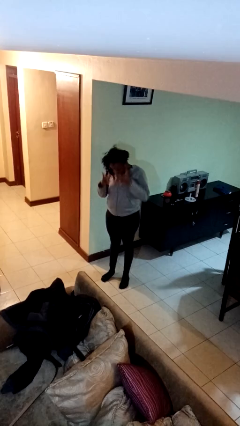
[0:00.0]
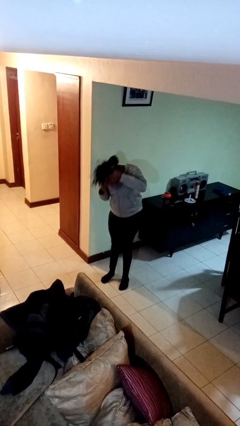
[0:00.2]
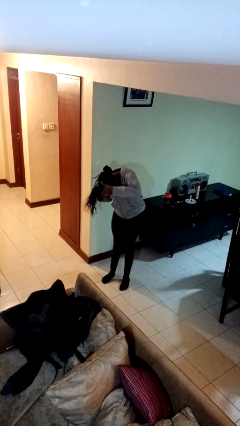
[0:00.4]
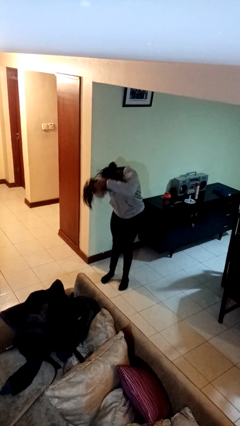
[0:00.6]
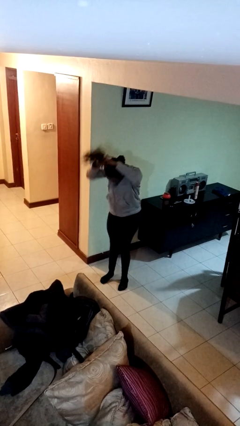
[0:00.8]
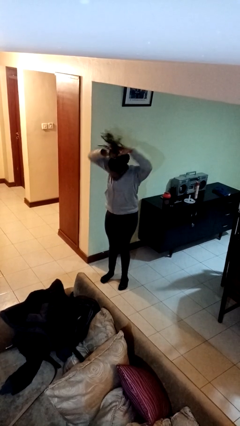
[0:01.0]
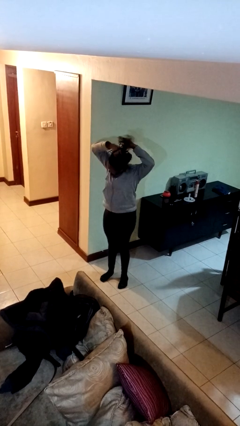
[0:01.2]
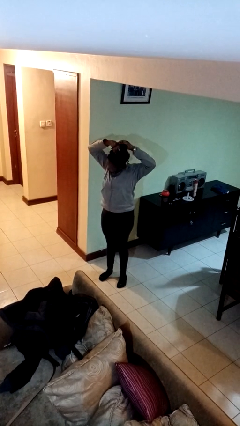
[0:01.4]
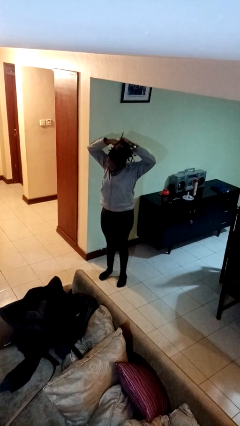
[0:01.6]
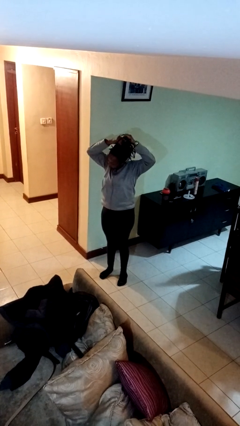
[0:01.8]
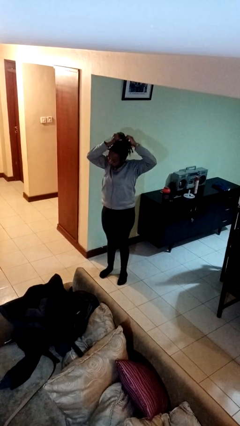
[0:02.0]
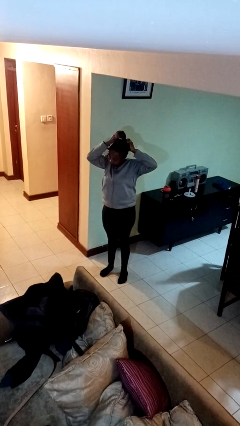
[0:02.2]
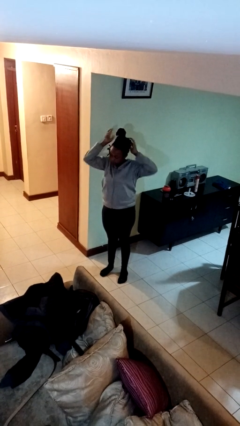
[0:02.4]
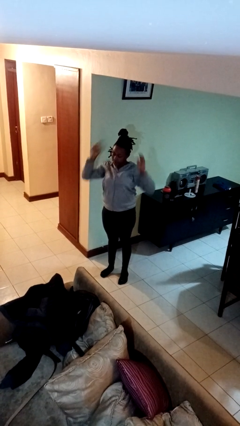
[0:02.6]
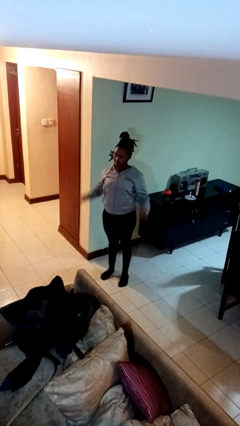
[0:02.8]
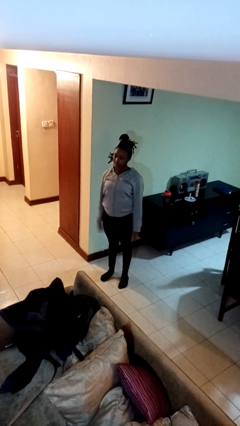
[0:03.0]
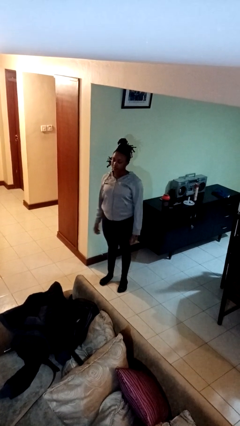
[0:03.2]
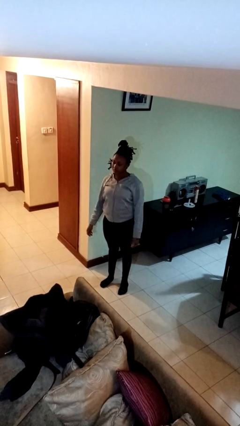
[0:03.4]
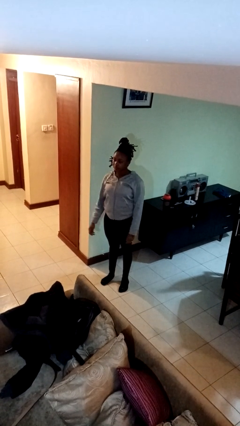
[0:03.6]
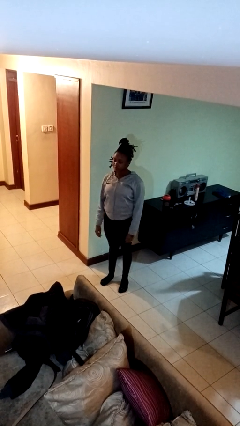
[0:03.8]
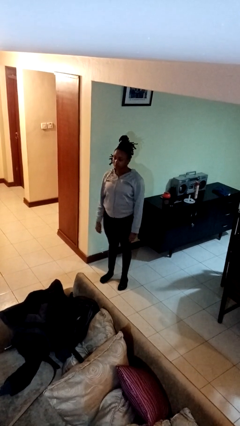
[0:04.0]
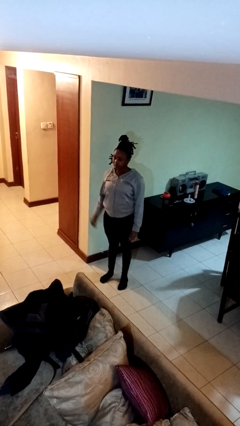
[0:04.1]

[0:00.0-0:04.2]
person puts hair in ponytail

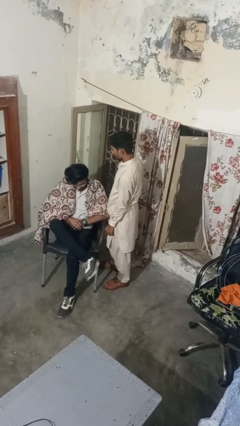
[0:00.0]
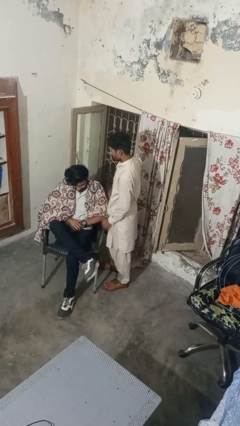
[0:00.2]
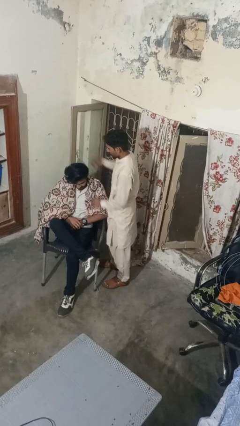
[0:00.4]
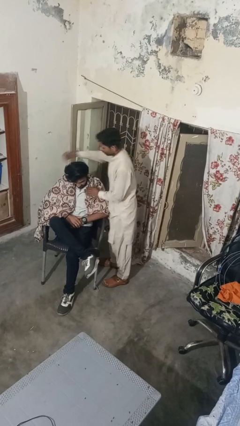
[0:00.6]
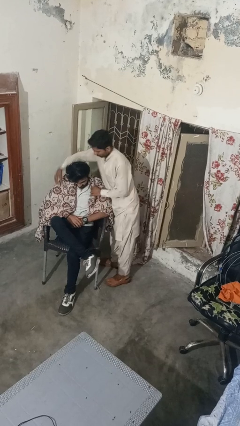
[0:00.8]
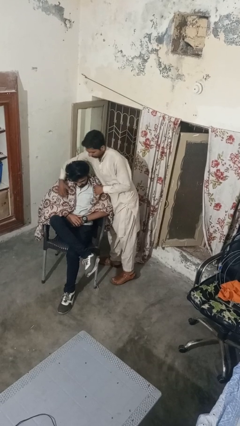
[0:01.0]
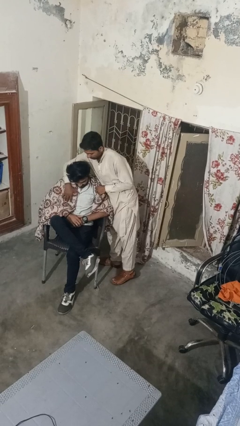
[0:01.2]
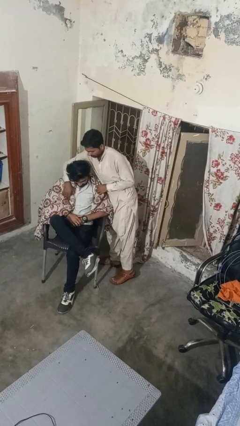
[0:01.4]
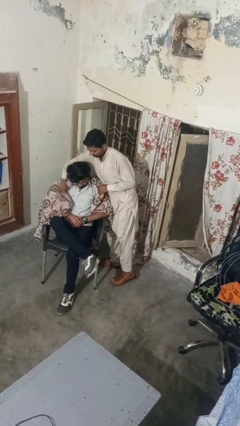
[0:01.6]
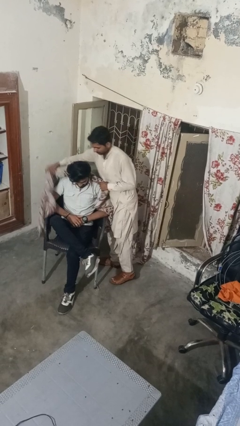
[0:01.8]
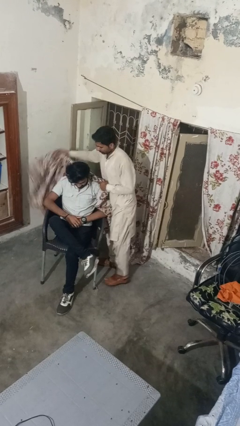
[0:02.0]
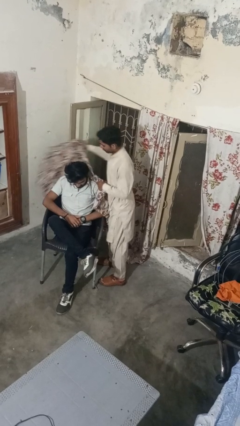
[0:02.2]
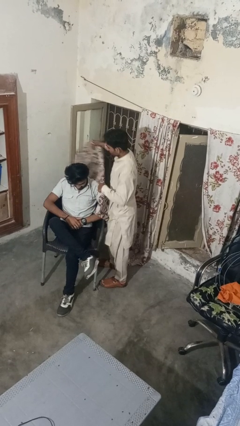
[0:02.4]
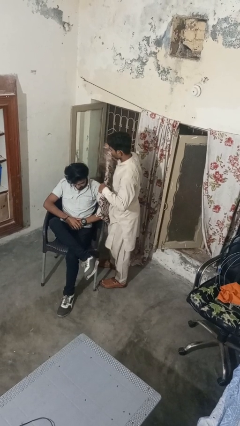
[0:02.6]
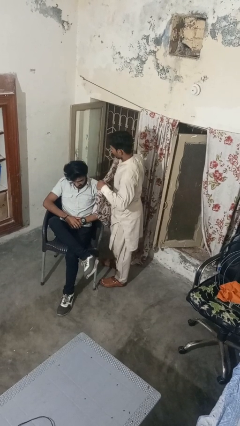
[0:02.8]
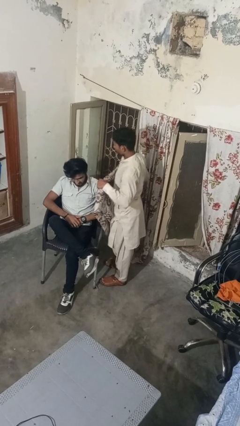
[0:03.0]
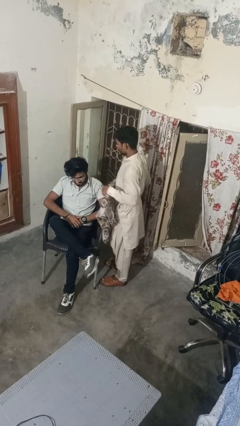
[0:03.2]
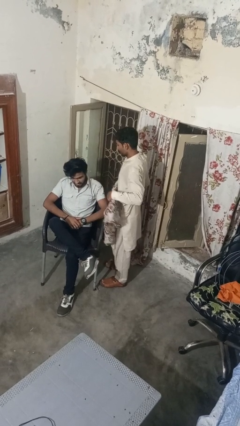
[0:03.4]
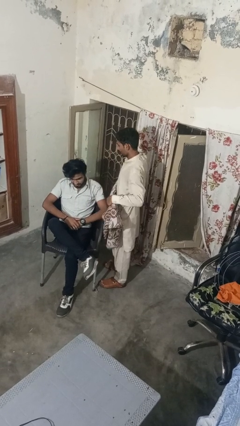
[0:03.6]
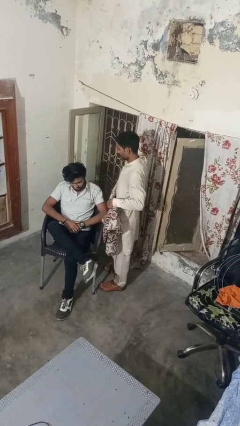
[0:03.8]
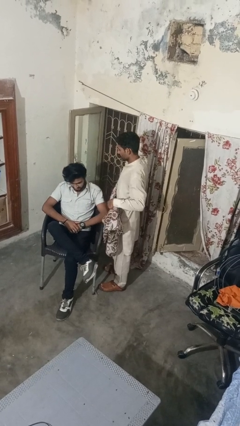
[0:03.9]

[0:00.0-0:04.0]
person uncovers friend with blanket

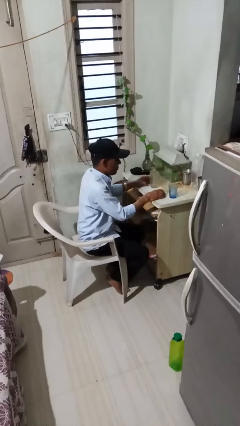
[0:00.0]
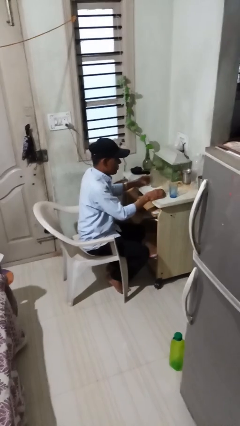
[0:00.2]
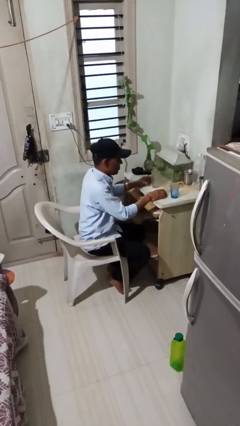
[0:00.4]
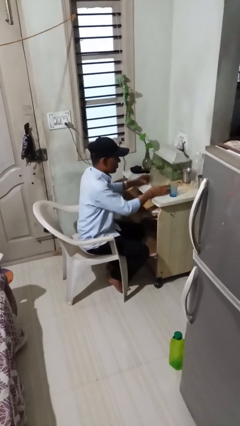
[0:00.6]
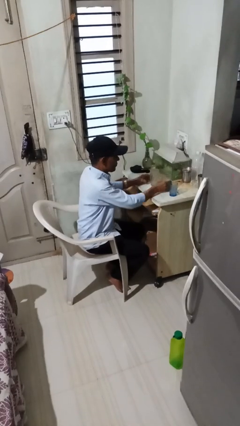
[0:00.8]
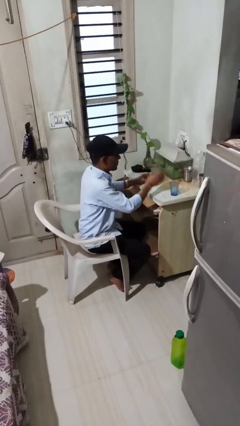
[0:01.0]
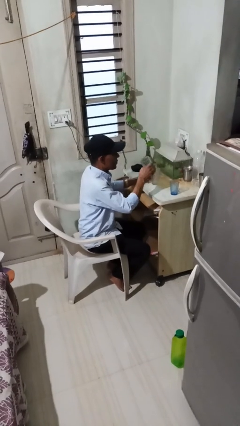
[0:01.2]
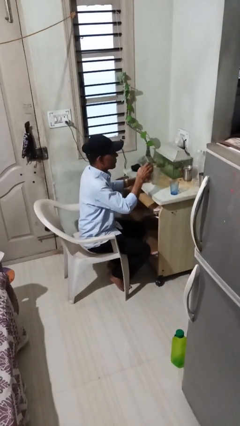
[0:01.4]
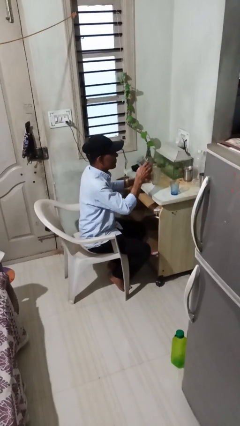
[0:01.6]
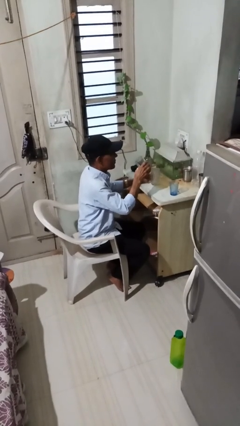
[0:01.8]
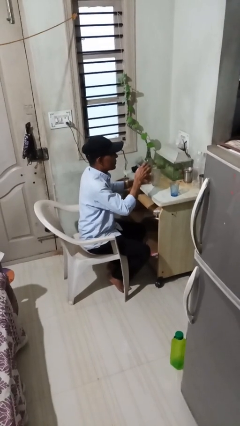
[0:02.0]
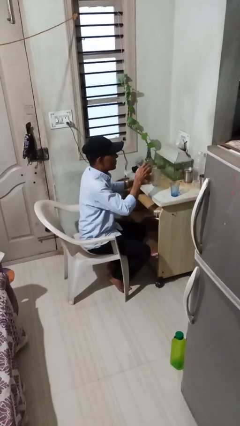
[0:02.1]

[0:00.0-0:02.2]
person picks up object from table

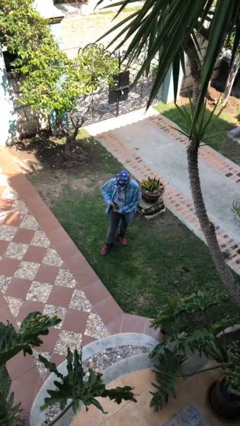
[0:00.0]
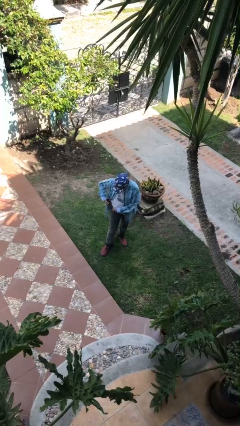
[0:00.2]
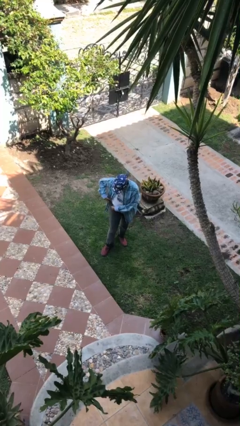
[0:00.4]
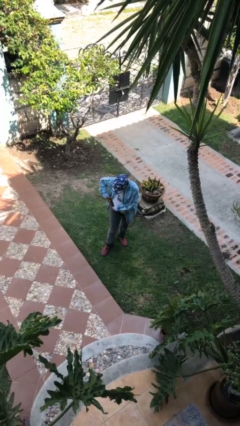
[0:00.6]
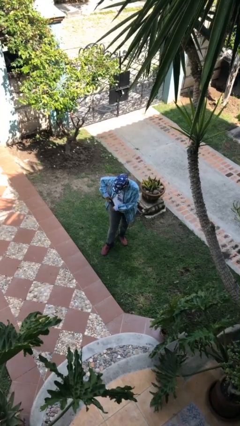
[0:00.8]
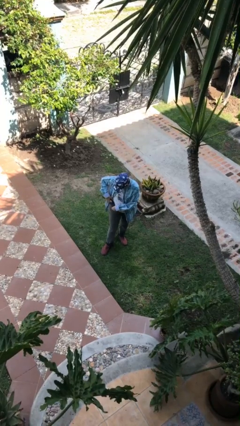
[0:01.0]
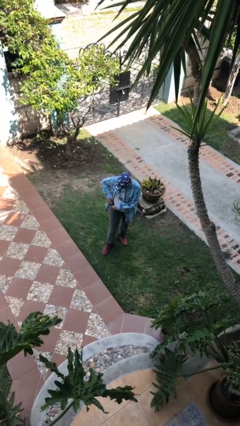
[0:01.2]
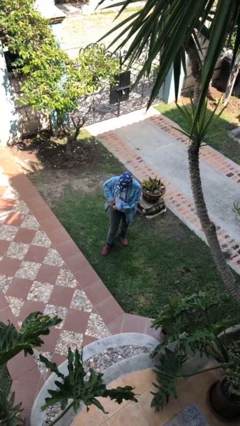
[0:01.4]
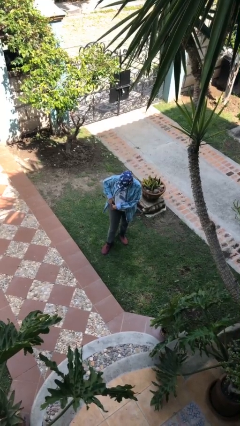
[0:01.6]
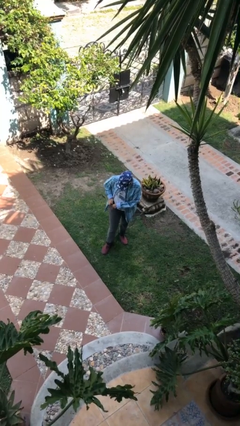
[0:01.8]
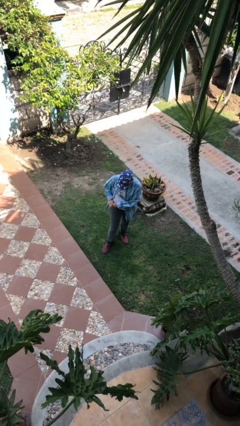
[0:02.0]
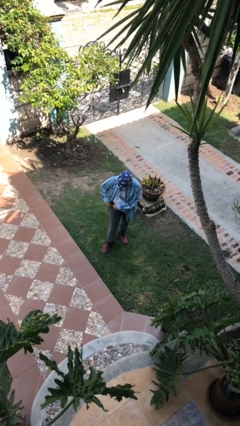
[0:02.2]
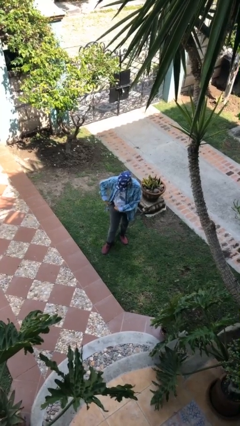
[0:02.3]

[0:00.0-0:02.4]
person puts phone into pocket

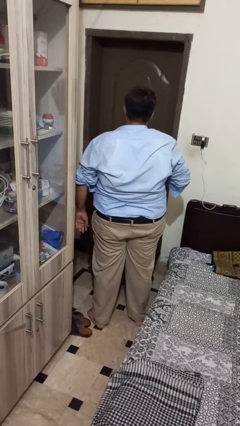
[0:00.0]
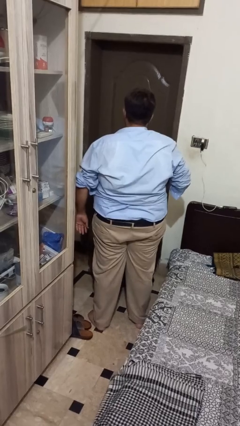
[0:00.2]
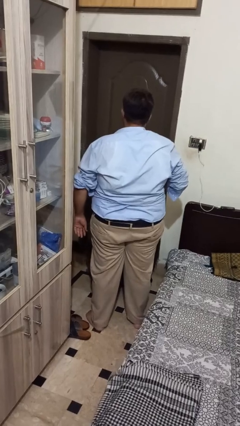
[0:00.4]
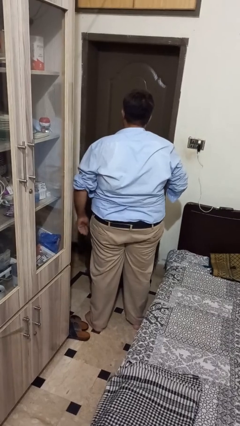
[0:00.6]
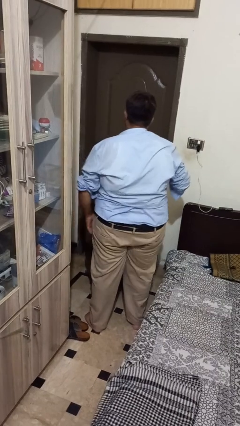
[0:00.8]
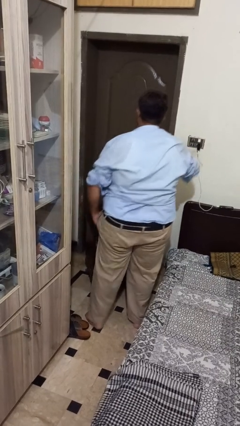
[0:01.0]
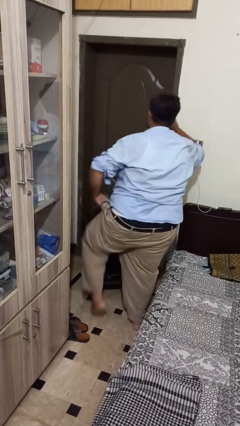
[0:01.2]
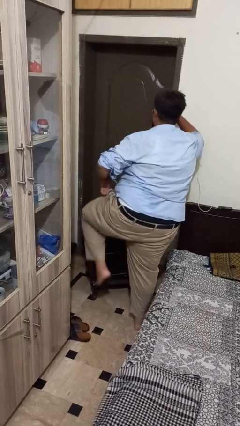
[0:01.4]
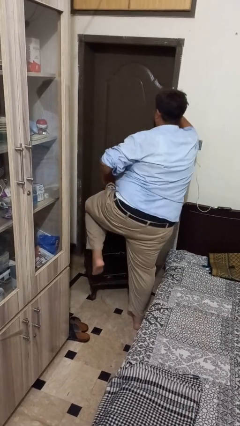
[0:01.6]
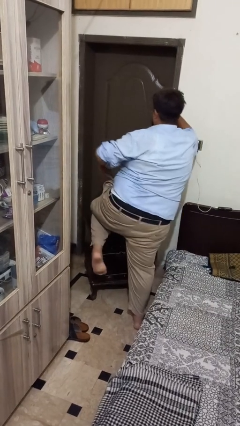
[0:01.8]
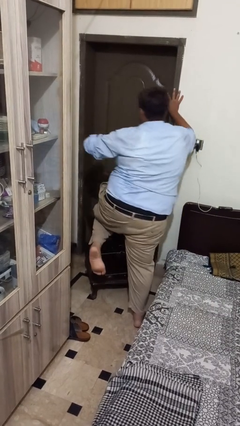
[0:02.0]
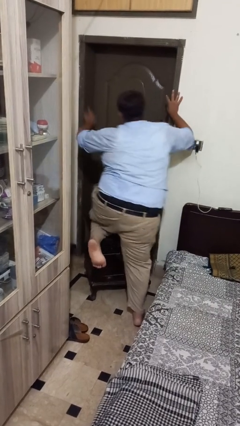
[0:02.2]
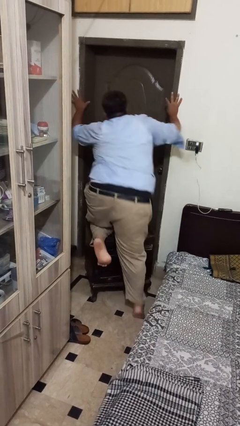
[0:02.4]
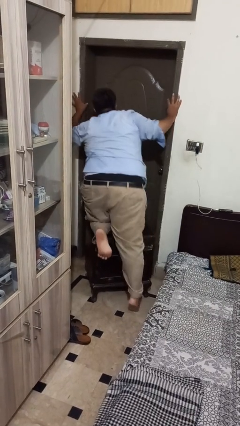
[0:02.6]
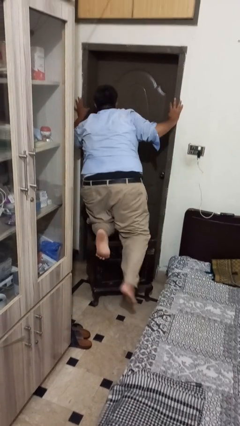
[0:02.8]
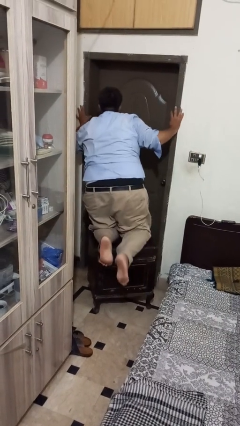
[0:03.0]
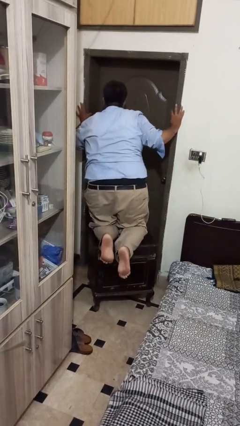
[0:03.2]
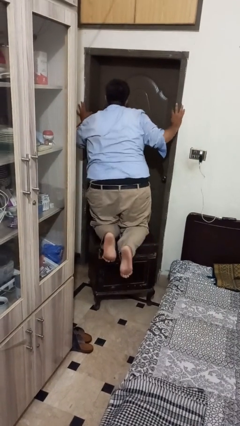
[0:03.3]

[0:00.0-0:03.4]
person climbs on table

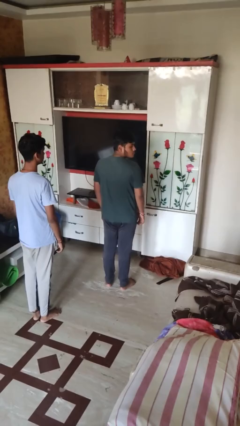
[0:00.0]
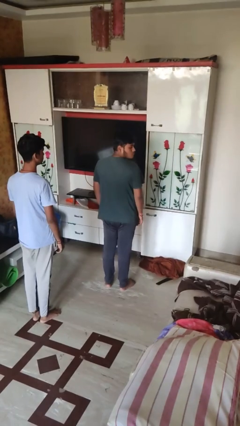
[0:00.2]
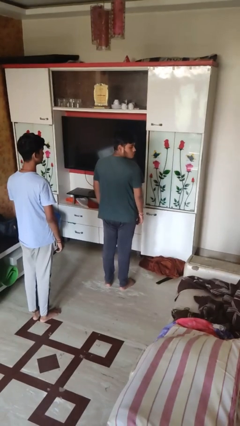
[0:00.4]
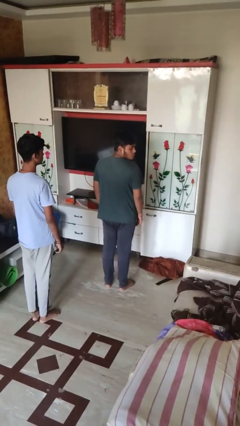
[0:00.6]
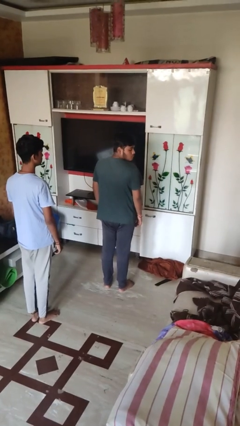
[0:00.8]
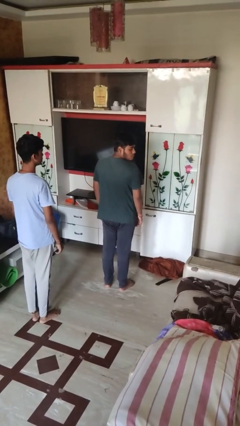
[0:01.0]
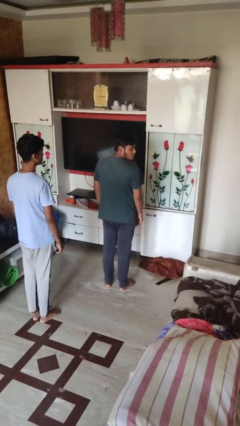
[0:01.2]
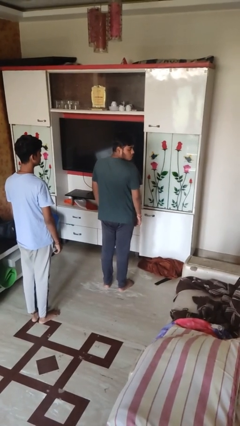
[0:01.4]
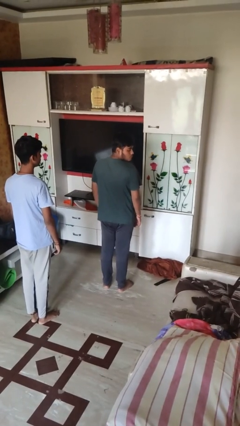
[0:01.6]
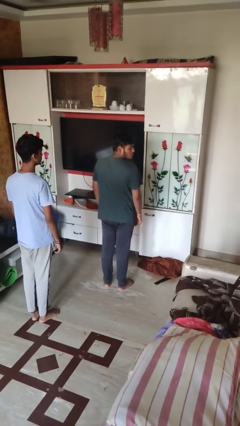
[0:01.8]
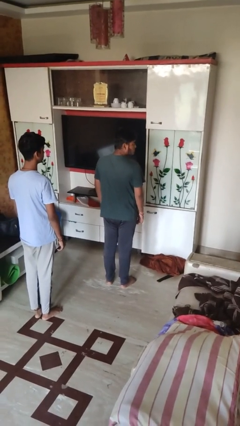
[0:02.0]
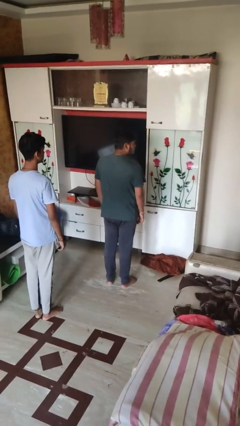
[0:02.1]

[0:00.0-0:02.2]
person looks over shoulder
